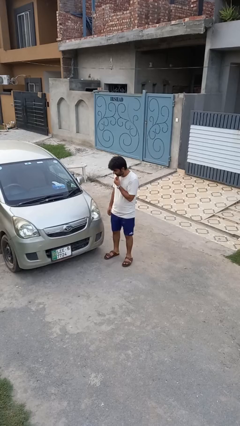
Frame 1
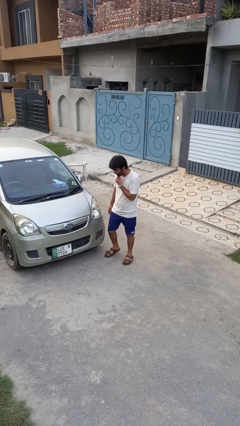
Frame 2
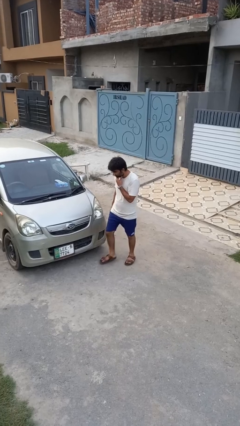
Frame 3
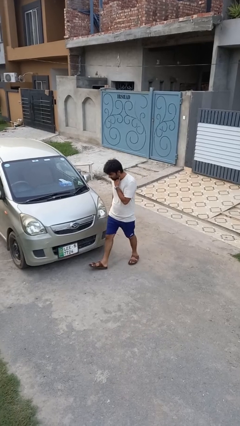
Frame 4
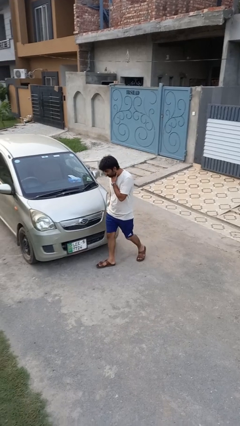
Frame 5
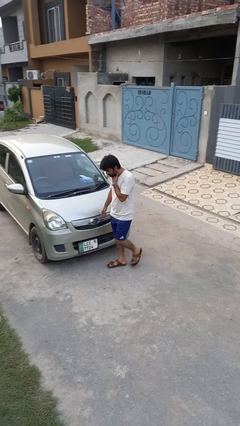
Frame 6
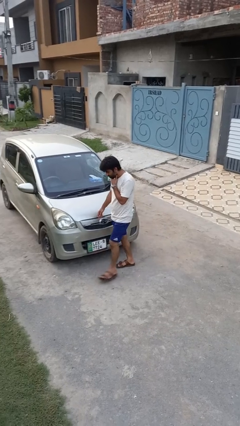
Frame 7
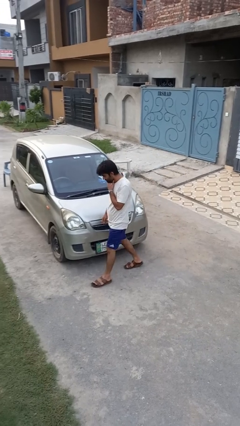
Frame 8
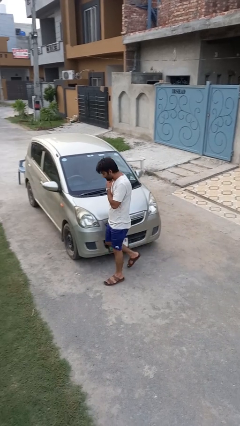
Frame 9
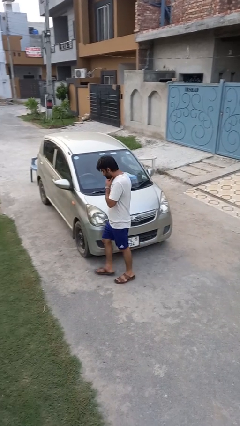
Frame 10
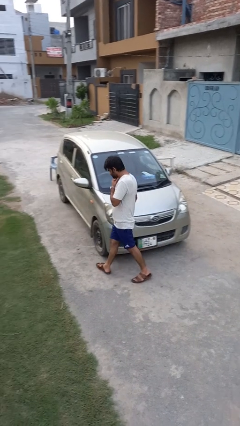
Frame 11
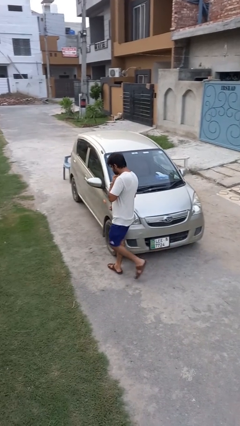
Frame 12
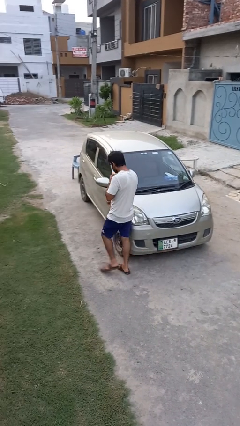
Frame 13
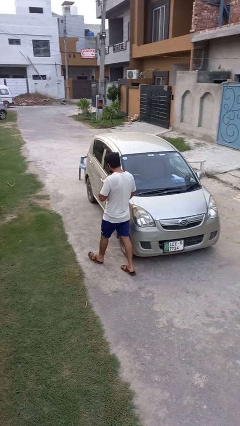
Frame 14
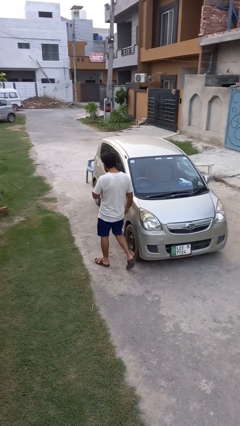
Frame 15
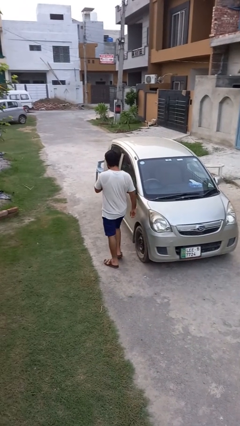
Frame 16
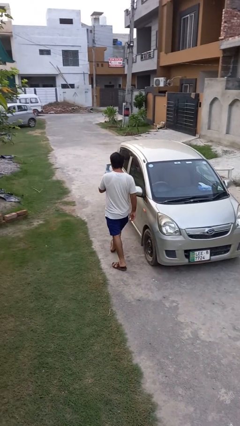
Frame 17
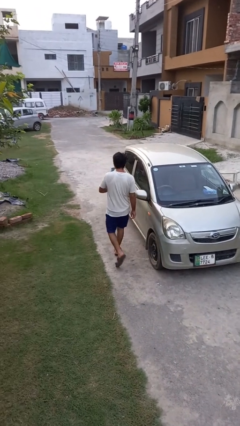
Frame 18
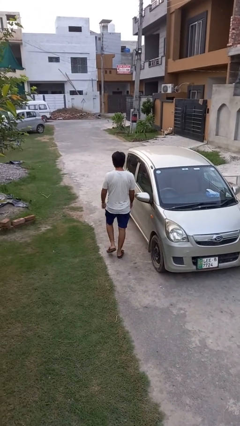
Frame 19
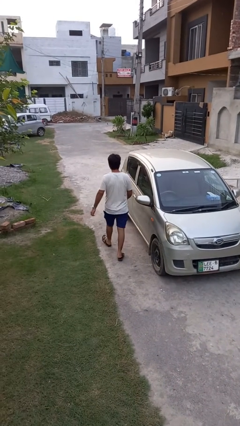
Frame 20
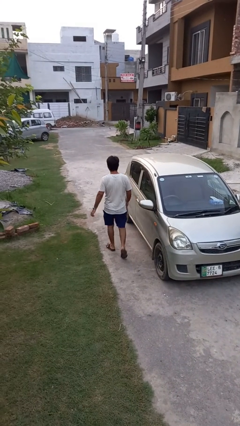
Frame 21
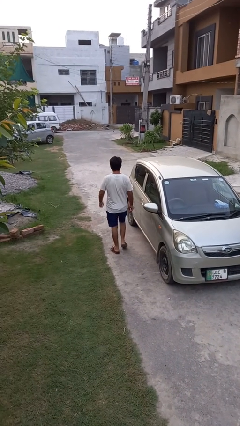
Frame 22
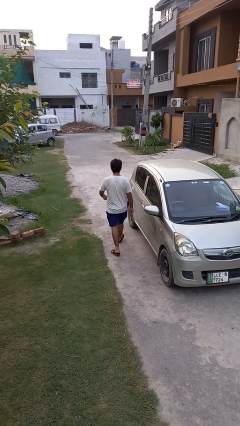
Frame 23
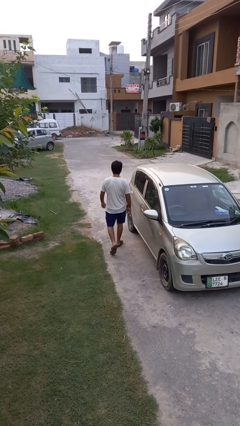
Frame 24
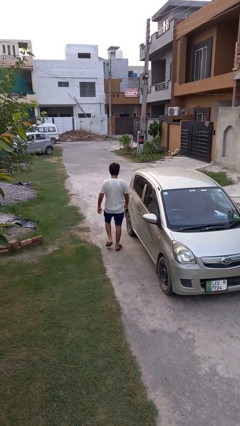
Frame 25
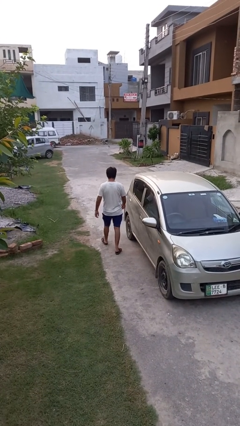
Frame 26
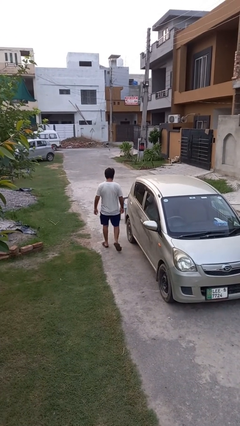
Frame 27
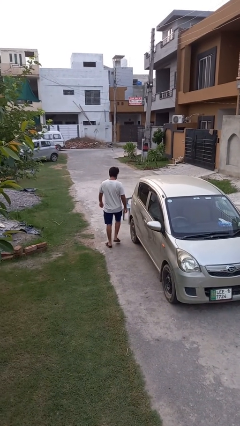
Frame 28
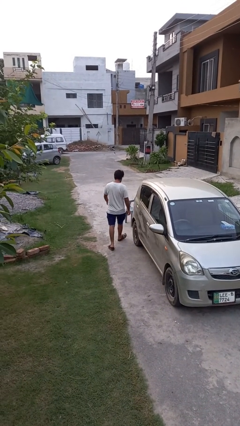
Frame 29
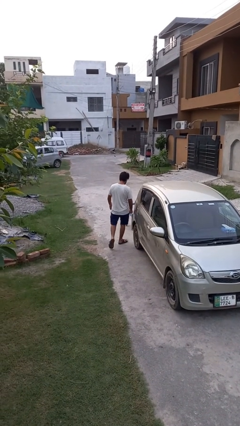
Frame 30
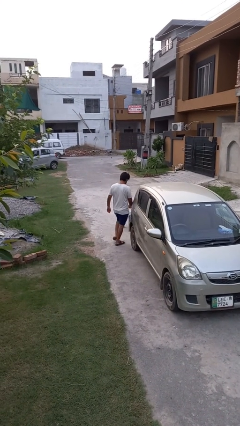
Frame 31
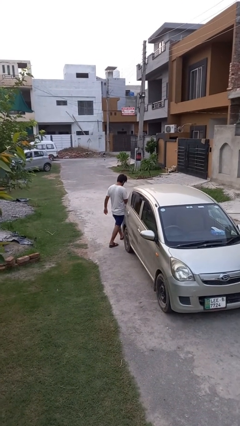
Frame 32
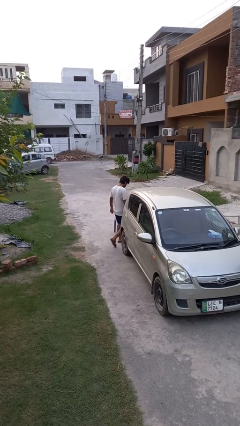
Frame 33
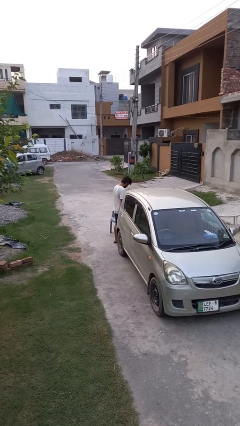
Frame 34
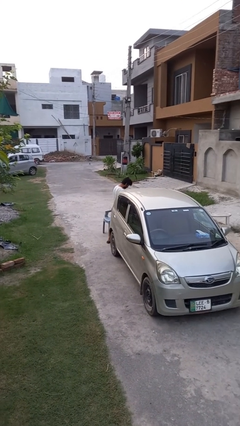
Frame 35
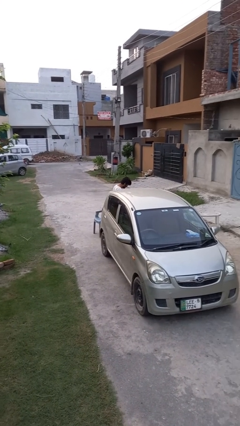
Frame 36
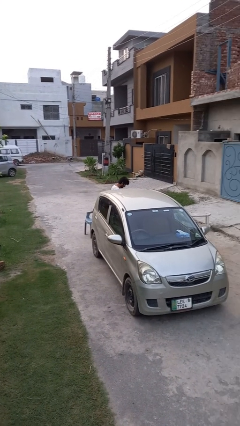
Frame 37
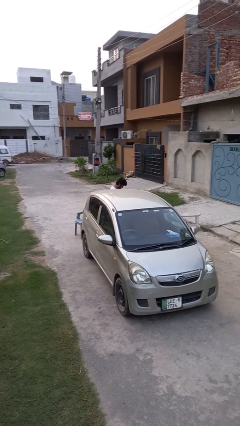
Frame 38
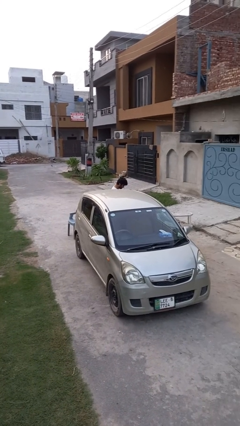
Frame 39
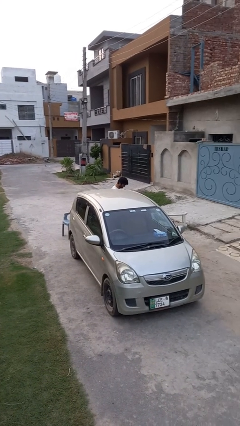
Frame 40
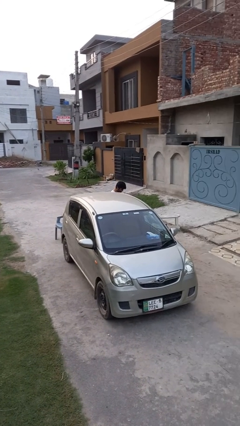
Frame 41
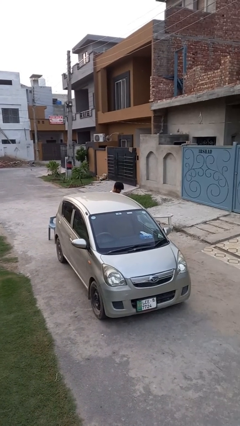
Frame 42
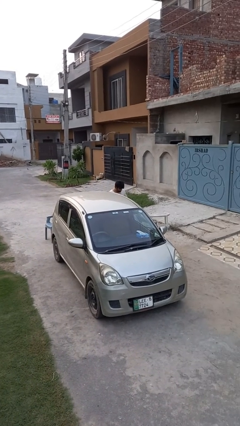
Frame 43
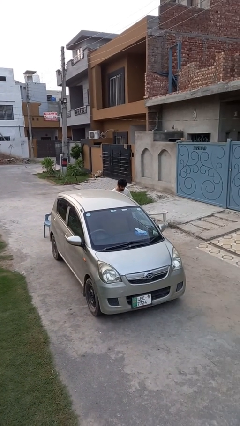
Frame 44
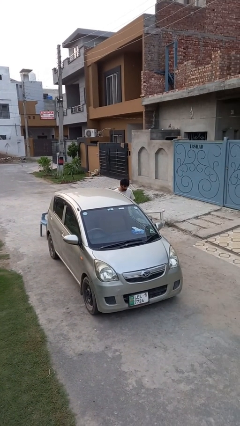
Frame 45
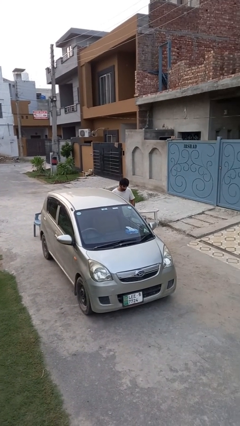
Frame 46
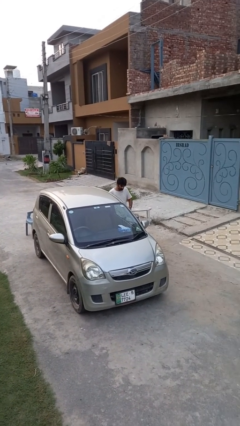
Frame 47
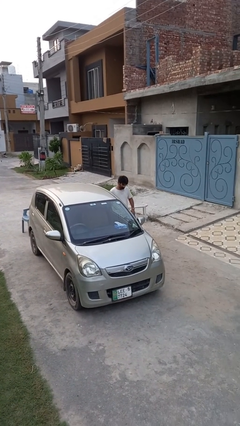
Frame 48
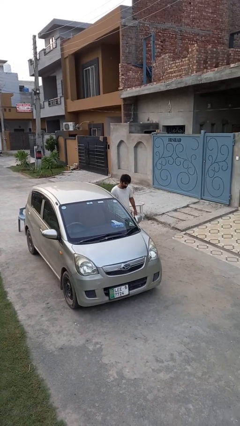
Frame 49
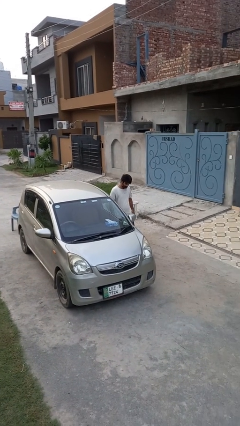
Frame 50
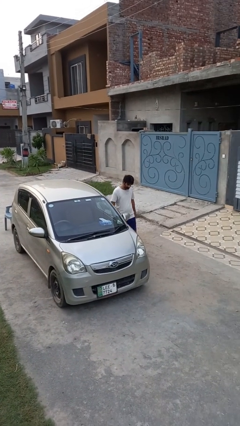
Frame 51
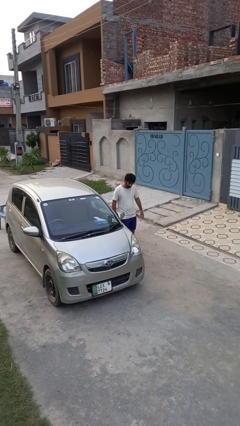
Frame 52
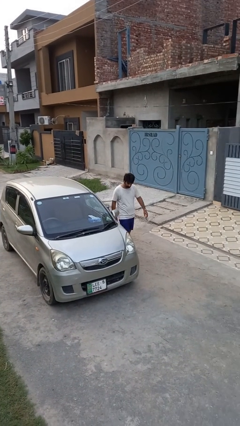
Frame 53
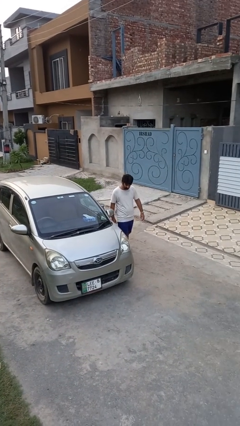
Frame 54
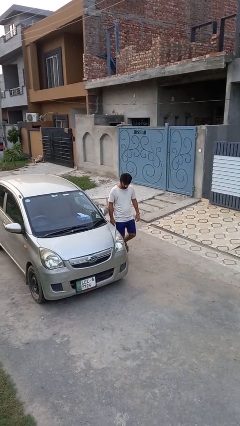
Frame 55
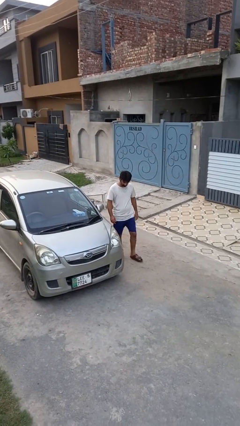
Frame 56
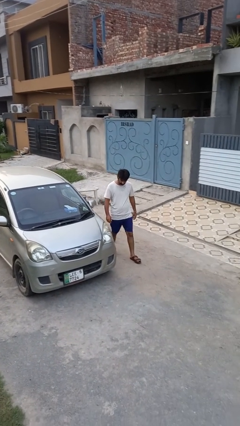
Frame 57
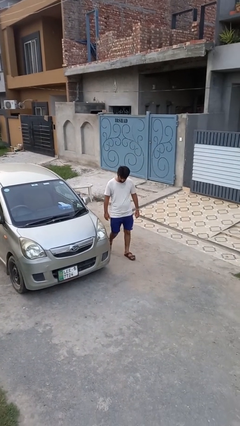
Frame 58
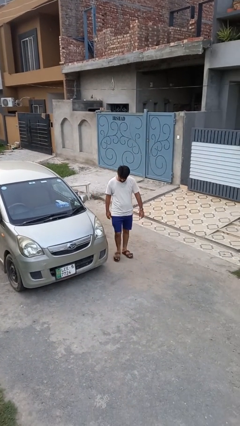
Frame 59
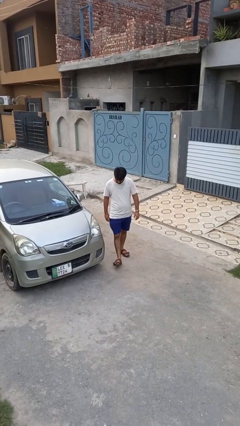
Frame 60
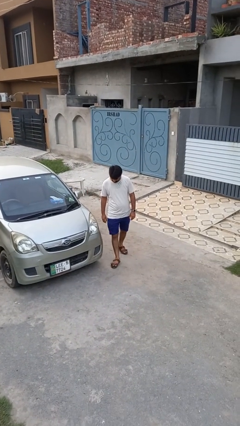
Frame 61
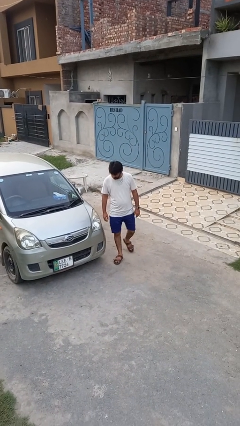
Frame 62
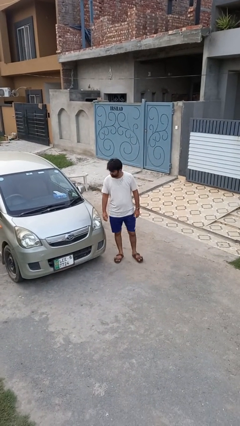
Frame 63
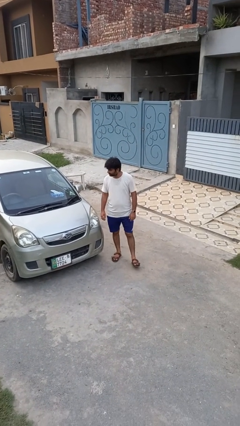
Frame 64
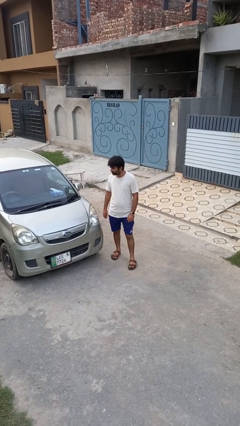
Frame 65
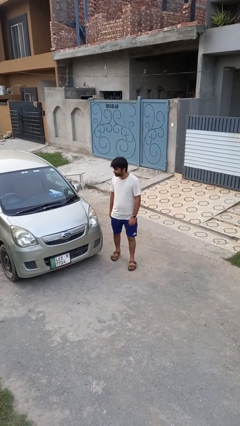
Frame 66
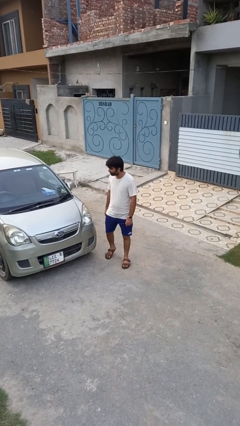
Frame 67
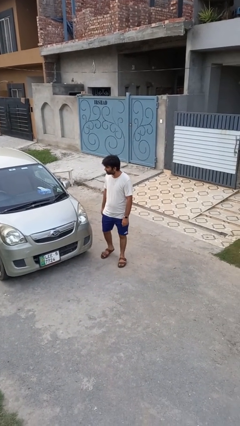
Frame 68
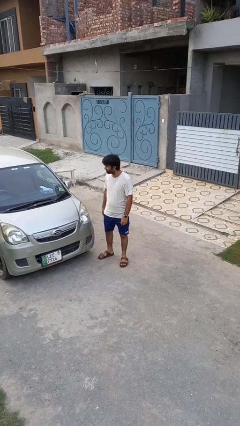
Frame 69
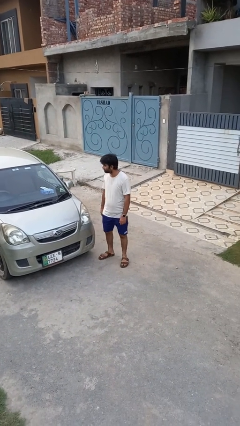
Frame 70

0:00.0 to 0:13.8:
person walks around car

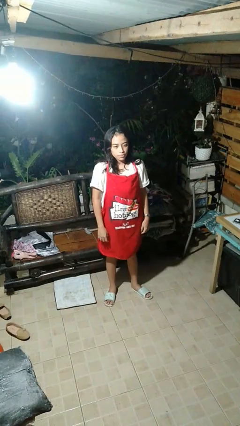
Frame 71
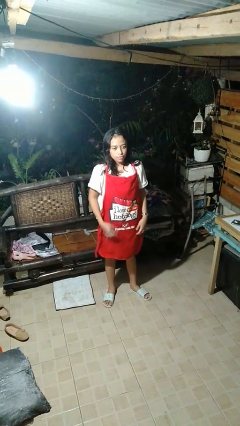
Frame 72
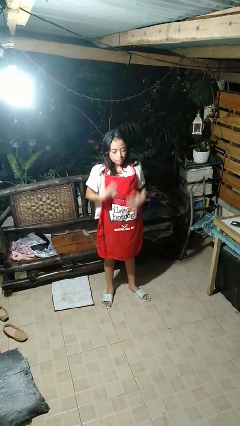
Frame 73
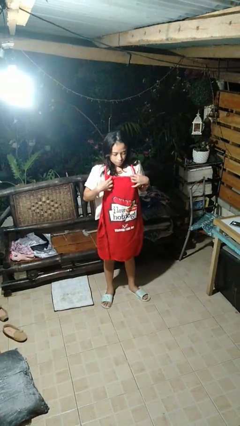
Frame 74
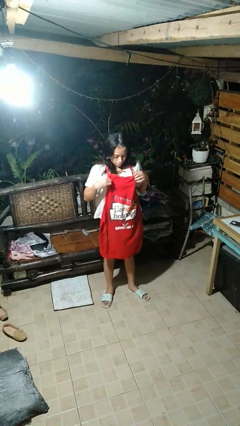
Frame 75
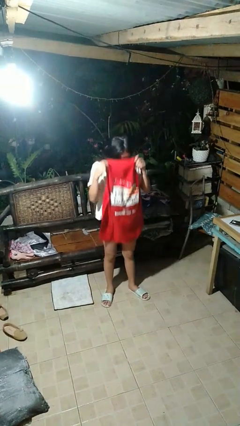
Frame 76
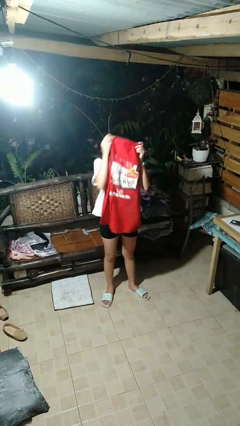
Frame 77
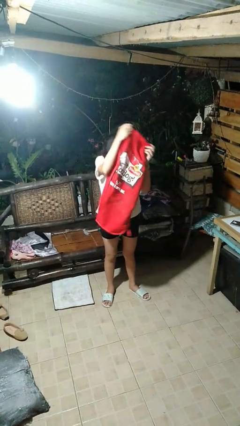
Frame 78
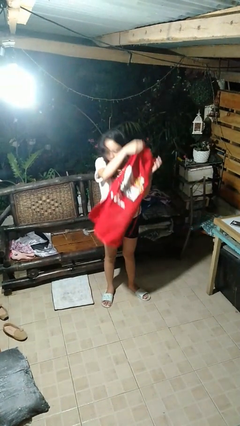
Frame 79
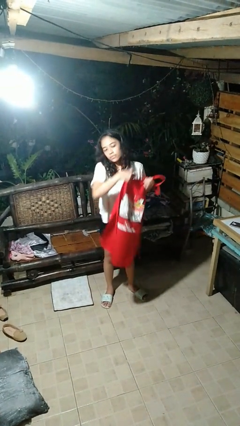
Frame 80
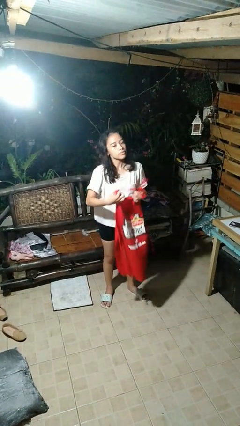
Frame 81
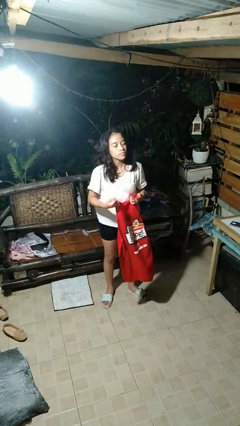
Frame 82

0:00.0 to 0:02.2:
person takes off apron

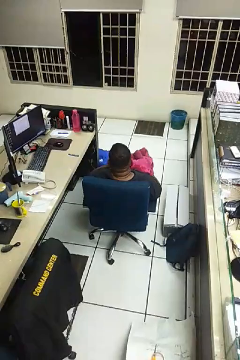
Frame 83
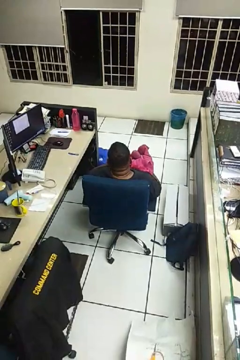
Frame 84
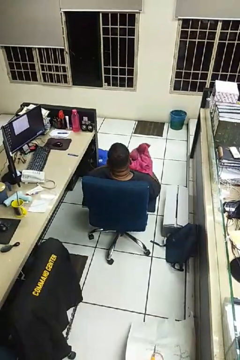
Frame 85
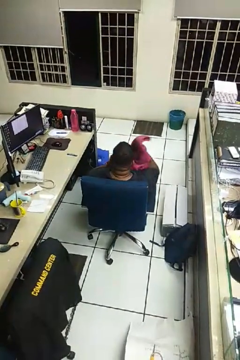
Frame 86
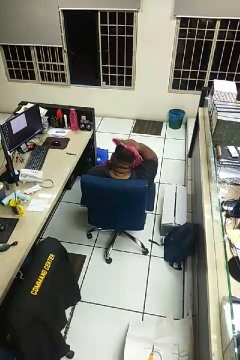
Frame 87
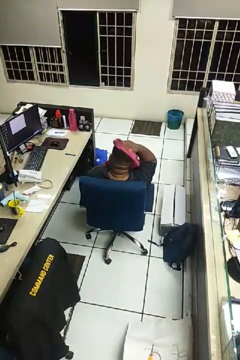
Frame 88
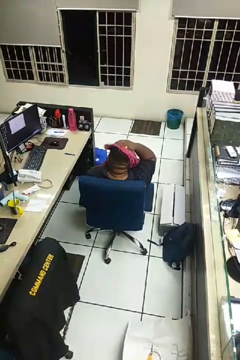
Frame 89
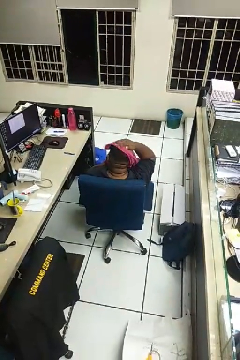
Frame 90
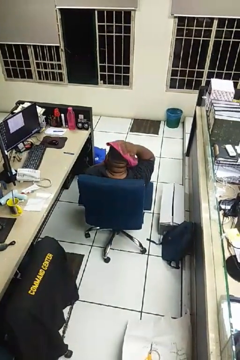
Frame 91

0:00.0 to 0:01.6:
person dries hair with towel

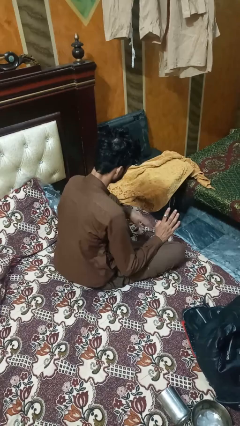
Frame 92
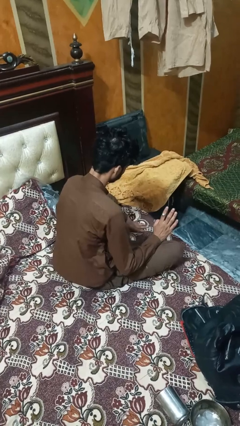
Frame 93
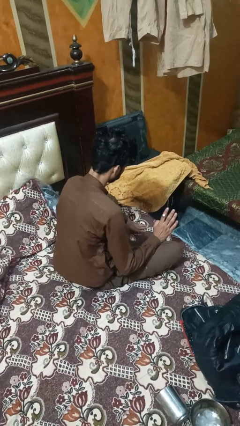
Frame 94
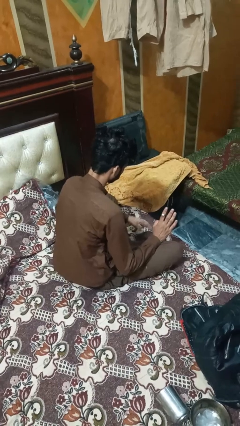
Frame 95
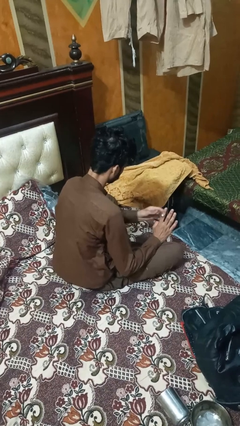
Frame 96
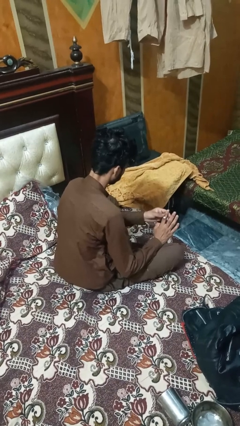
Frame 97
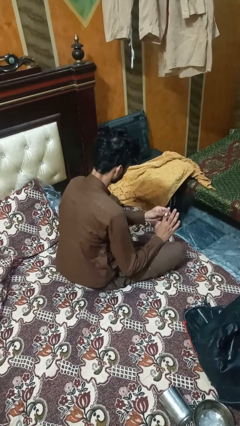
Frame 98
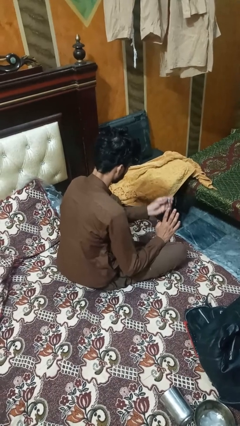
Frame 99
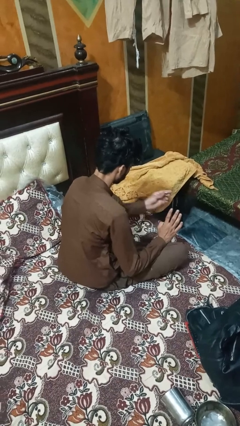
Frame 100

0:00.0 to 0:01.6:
person takes off ring
